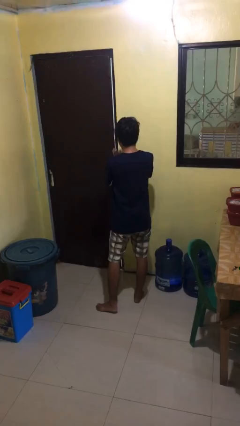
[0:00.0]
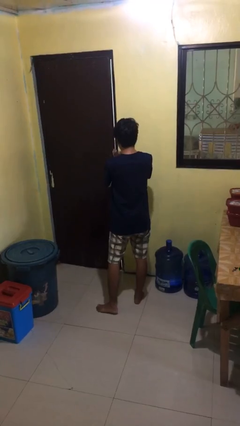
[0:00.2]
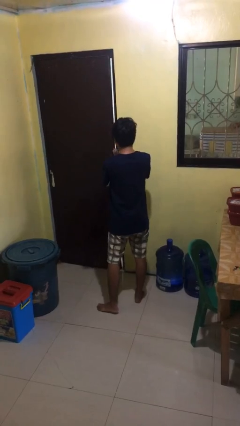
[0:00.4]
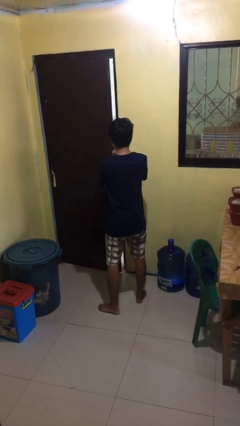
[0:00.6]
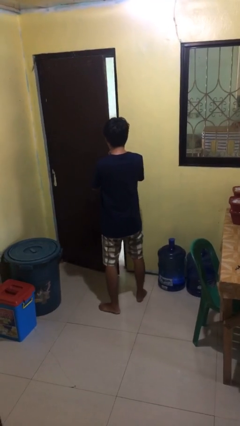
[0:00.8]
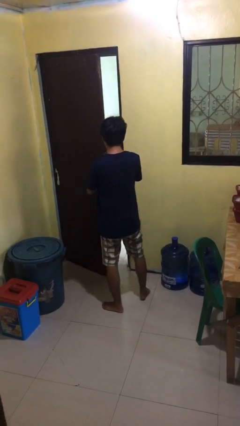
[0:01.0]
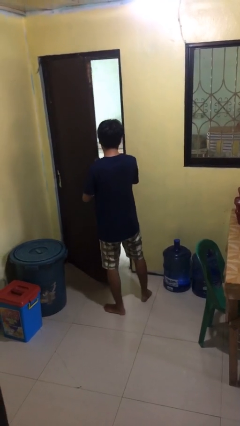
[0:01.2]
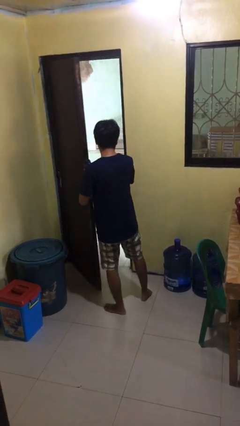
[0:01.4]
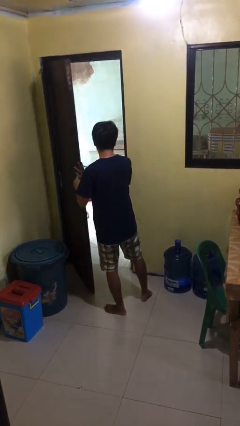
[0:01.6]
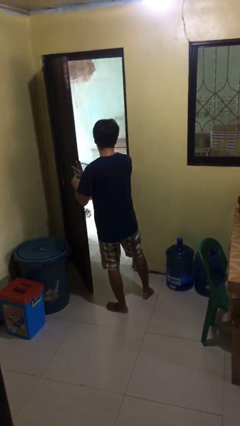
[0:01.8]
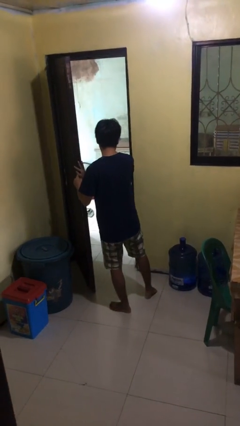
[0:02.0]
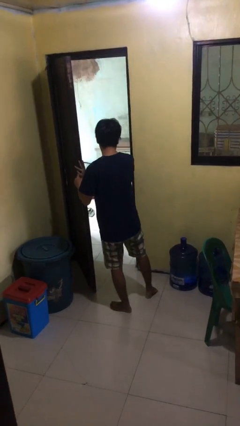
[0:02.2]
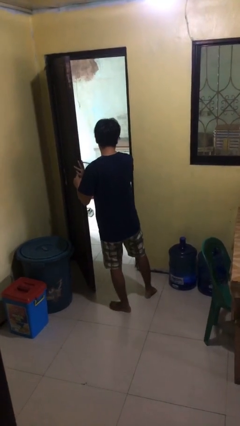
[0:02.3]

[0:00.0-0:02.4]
person opens facility door

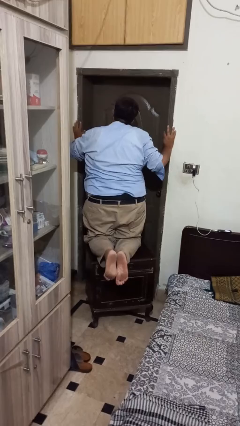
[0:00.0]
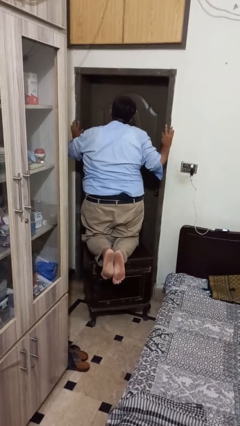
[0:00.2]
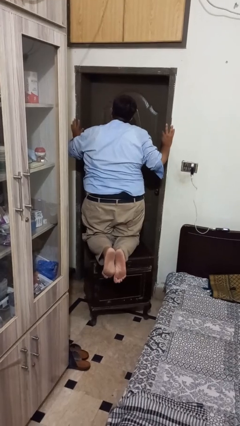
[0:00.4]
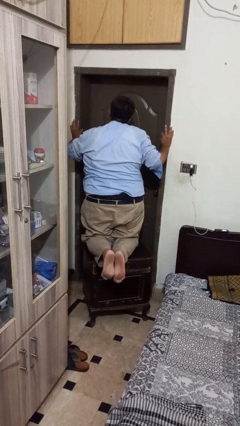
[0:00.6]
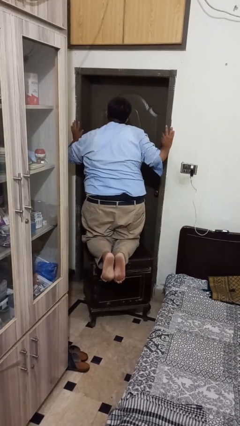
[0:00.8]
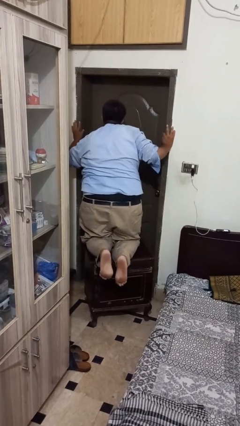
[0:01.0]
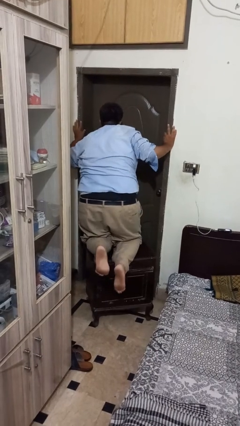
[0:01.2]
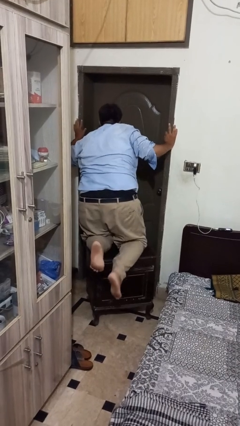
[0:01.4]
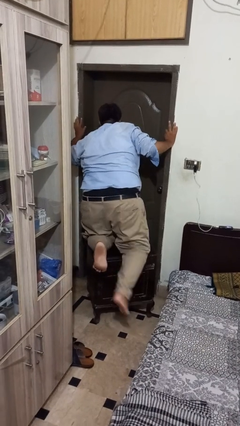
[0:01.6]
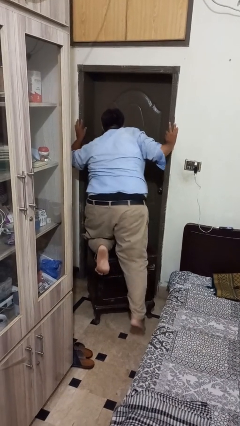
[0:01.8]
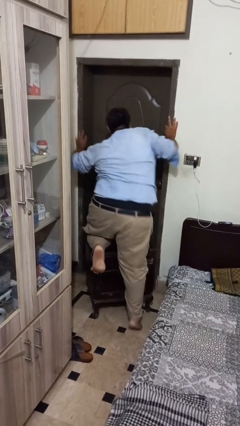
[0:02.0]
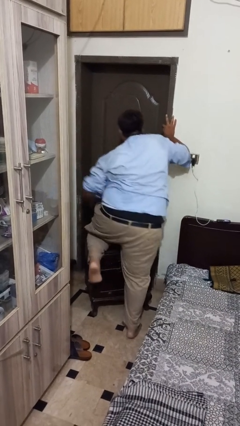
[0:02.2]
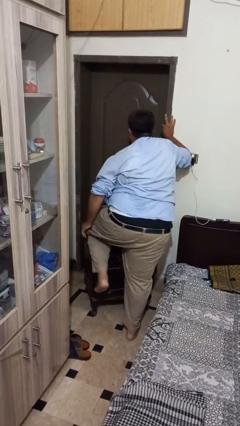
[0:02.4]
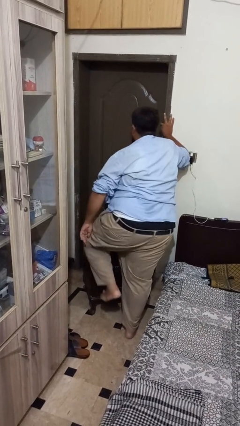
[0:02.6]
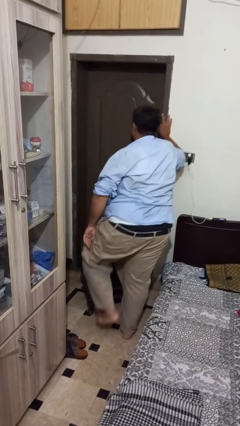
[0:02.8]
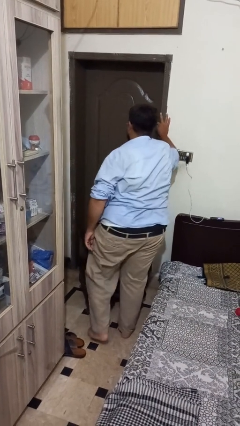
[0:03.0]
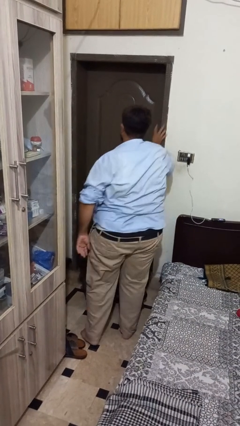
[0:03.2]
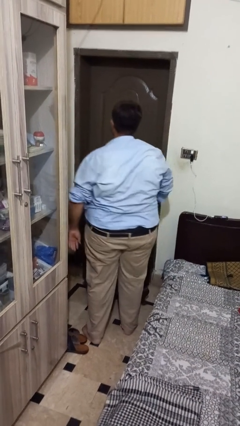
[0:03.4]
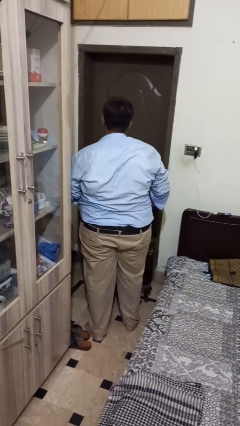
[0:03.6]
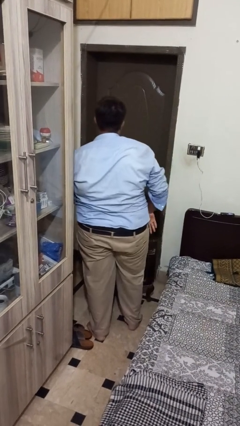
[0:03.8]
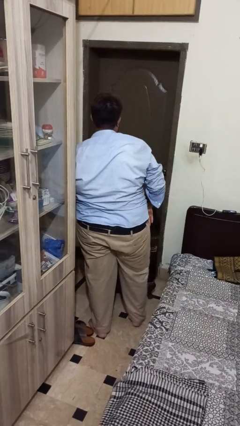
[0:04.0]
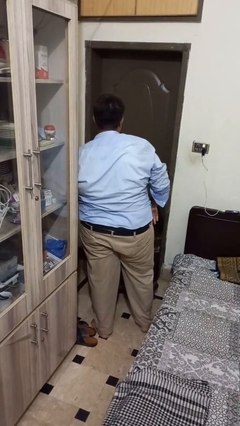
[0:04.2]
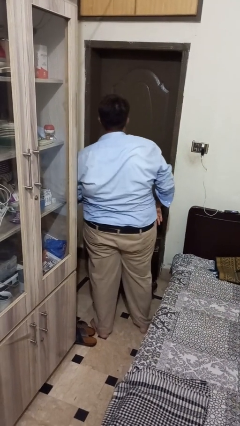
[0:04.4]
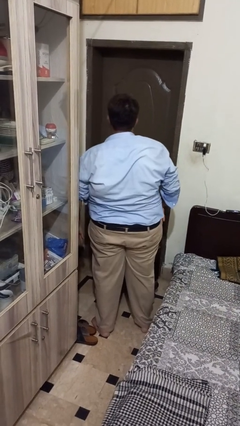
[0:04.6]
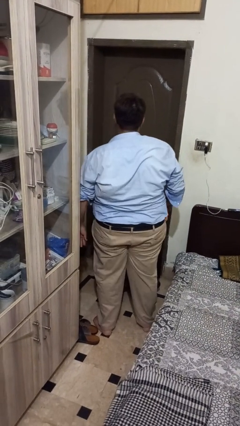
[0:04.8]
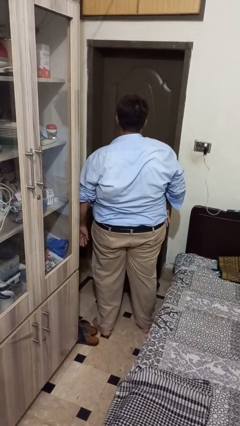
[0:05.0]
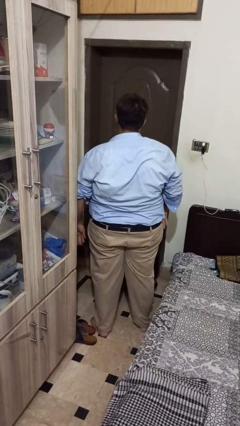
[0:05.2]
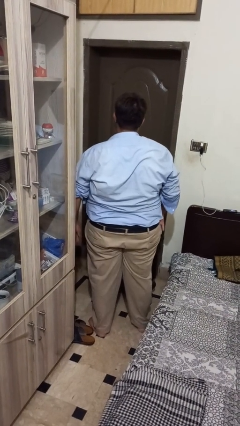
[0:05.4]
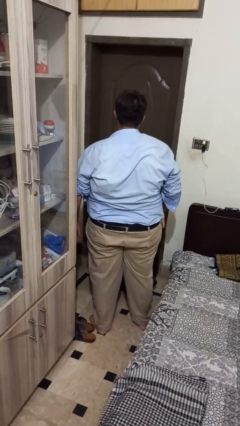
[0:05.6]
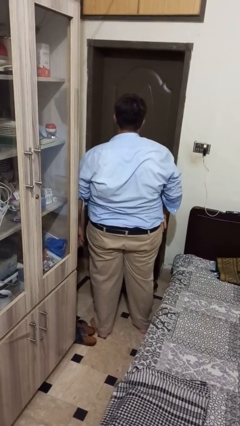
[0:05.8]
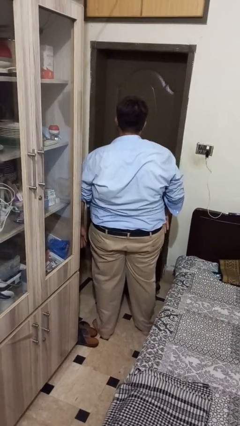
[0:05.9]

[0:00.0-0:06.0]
person climbs off table

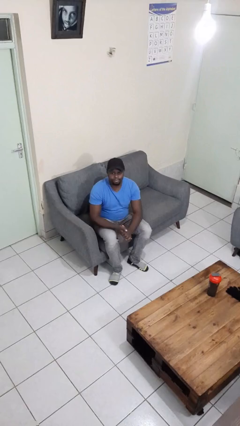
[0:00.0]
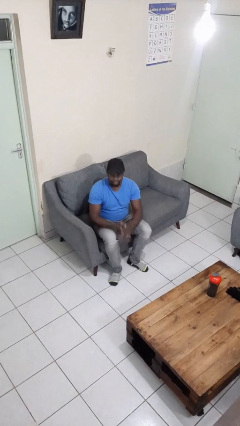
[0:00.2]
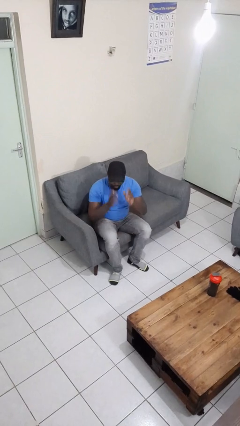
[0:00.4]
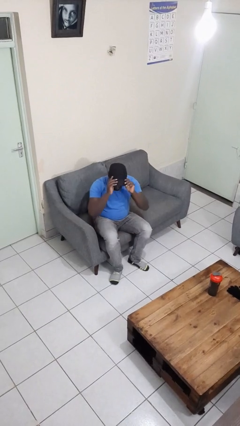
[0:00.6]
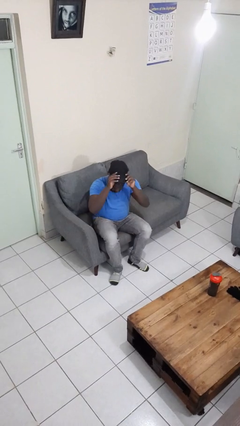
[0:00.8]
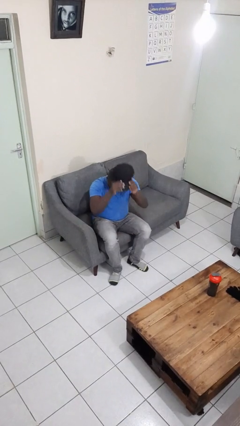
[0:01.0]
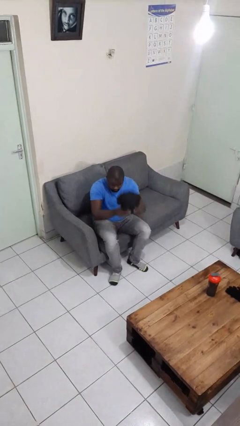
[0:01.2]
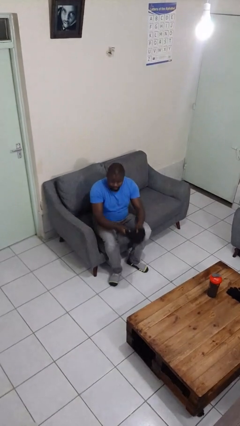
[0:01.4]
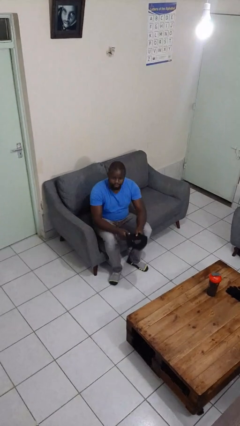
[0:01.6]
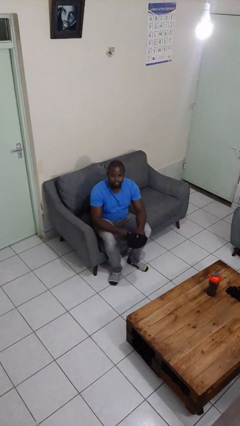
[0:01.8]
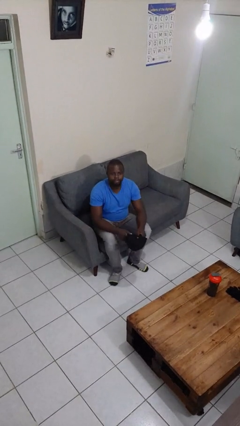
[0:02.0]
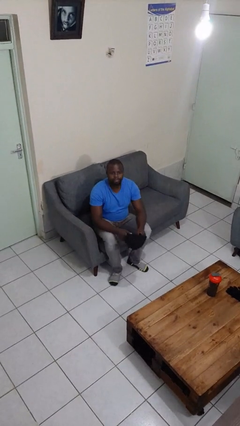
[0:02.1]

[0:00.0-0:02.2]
person takes off hat

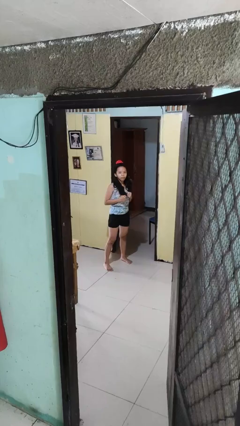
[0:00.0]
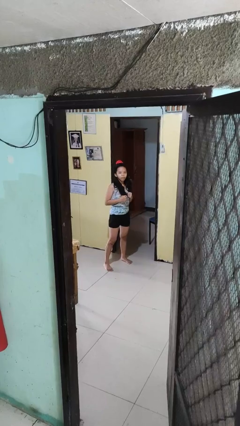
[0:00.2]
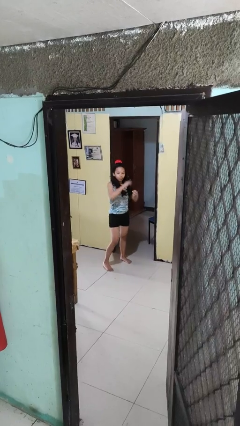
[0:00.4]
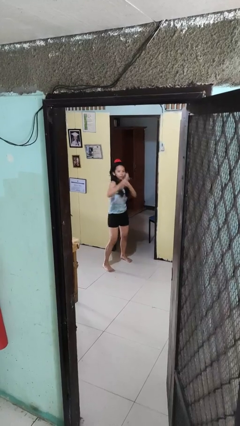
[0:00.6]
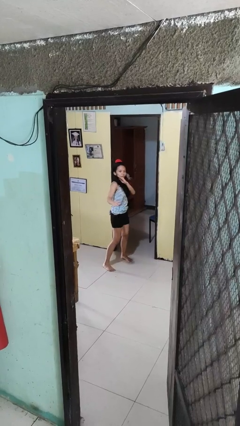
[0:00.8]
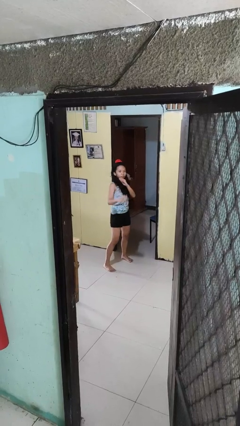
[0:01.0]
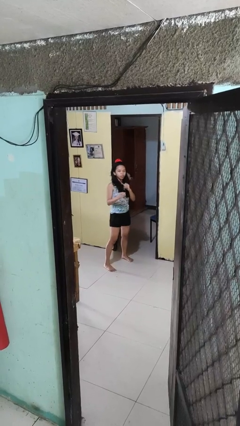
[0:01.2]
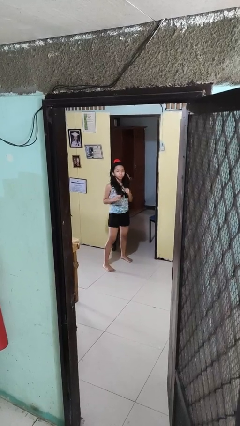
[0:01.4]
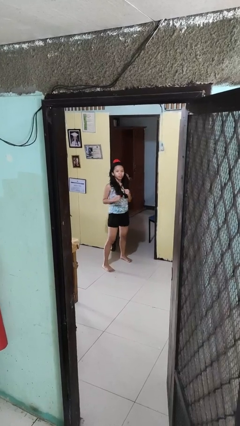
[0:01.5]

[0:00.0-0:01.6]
person karate chop

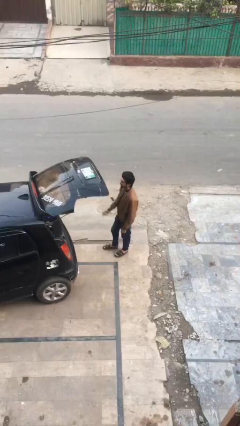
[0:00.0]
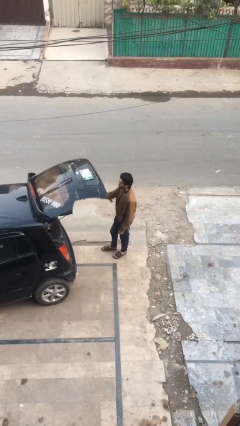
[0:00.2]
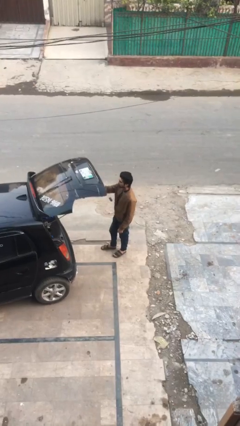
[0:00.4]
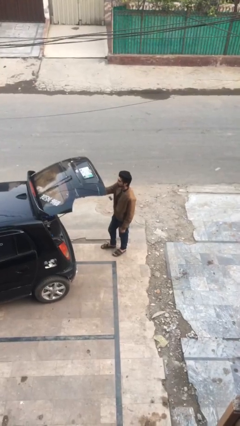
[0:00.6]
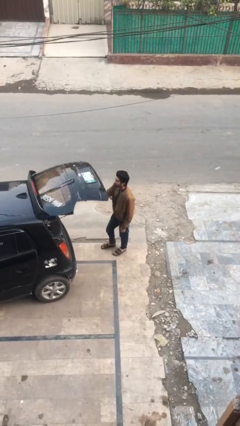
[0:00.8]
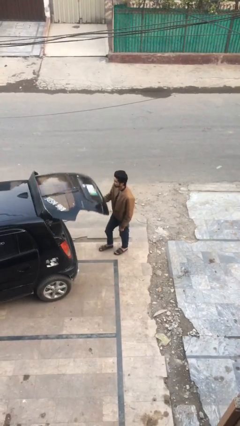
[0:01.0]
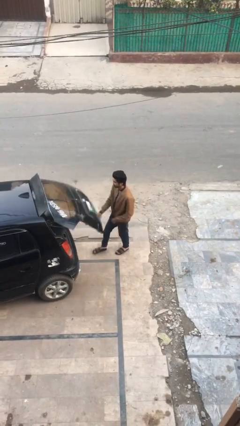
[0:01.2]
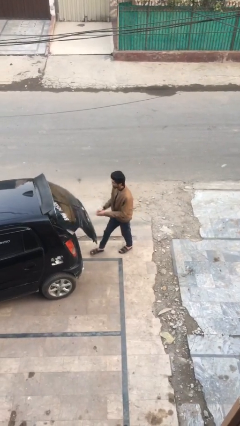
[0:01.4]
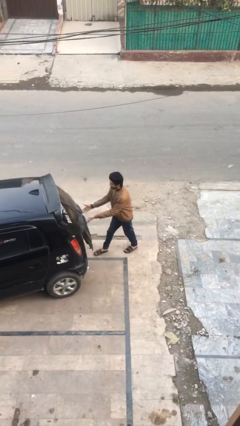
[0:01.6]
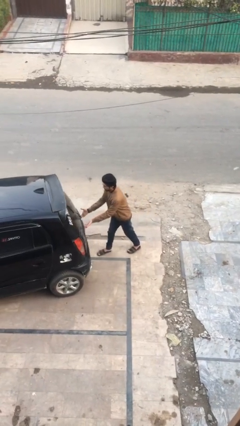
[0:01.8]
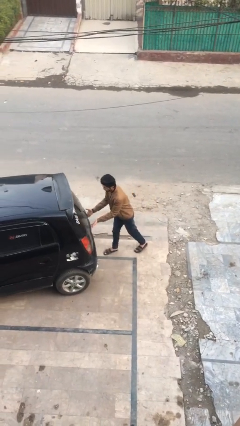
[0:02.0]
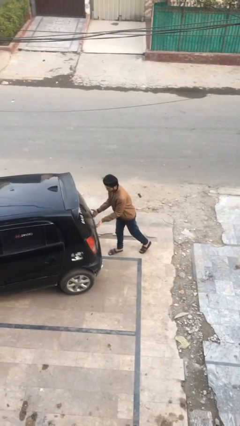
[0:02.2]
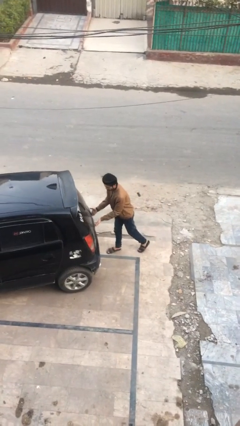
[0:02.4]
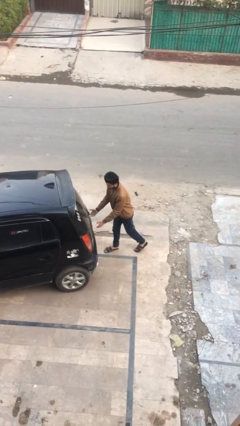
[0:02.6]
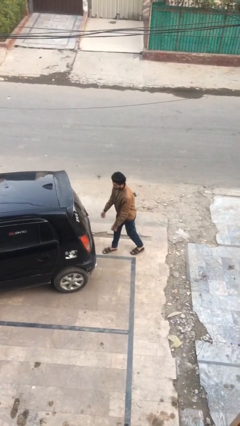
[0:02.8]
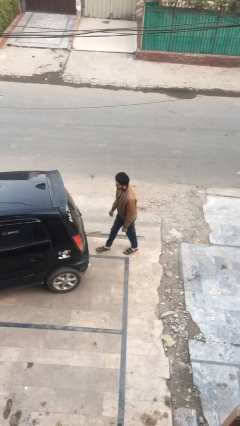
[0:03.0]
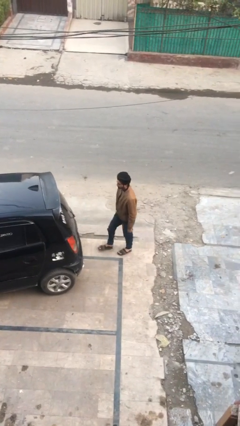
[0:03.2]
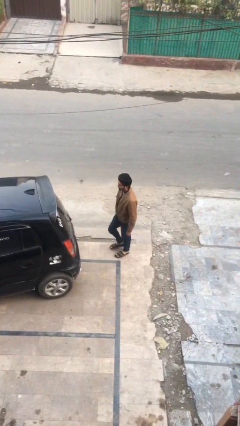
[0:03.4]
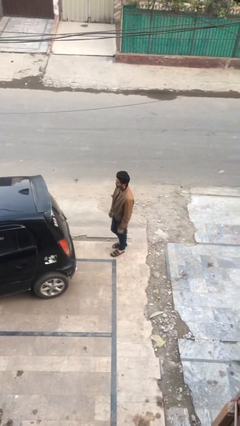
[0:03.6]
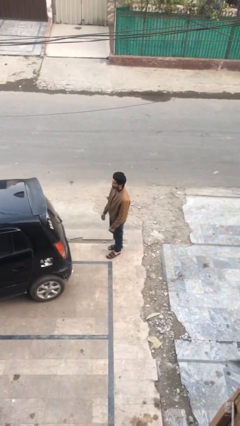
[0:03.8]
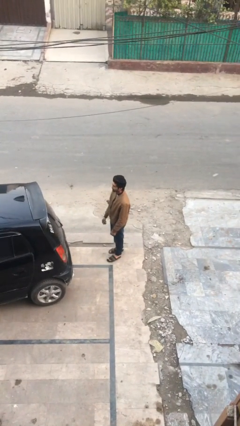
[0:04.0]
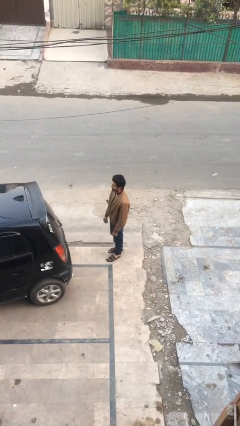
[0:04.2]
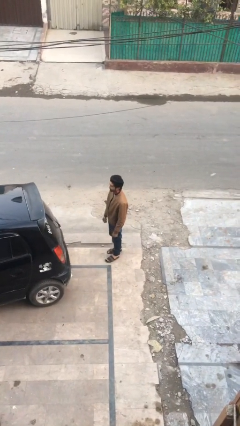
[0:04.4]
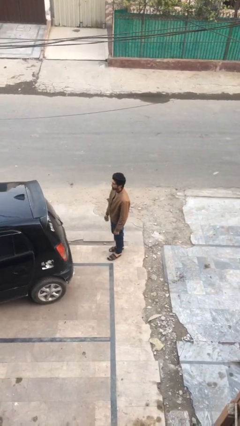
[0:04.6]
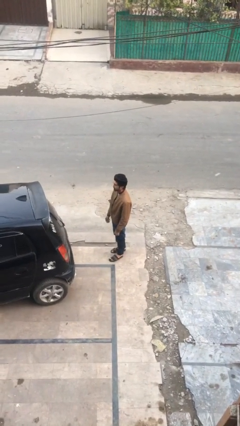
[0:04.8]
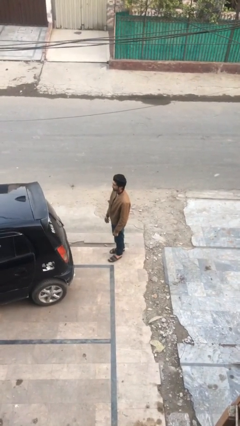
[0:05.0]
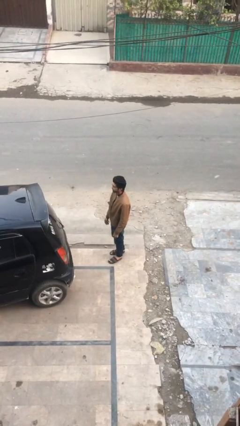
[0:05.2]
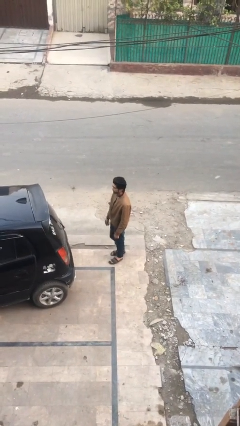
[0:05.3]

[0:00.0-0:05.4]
person closes car trunk
